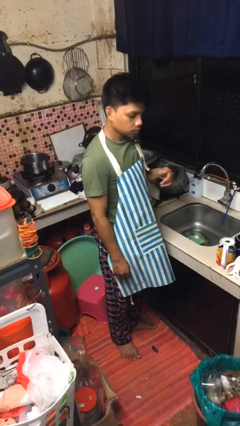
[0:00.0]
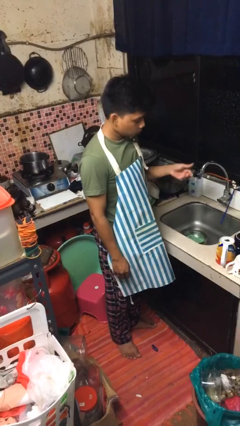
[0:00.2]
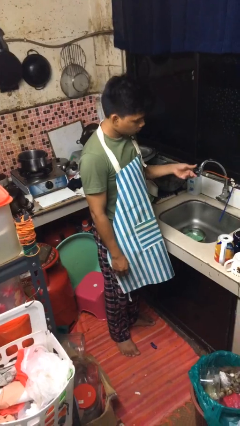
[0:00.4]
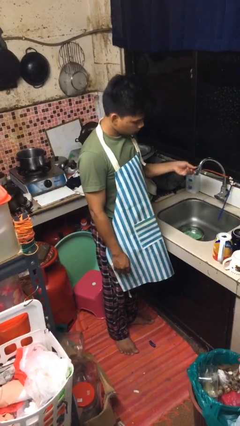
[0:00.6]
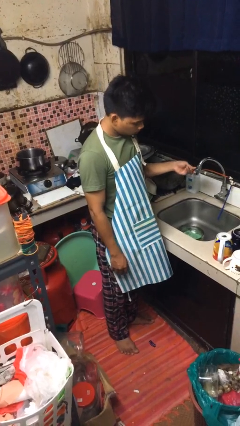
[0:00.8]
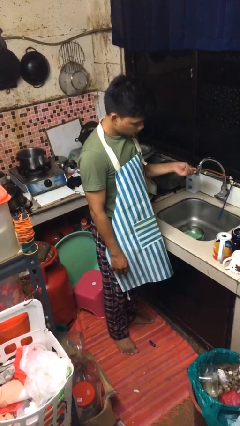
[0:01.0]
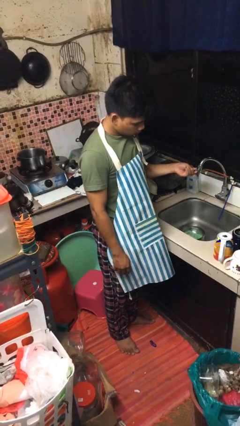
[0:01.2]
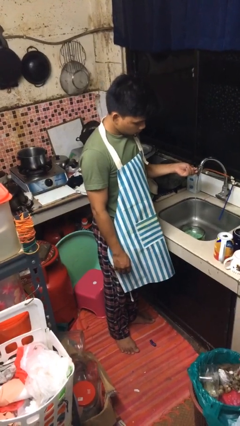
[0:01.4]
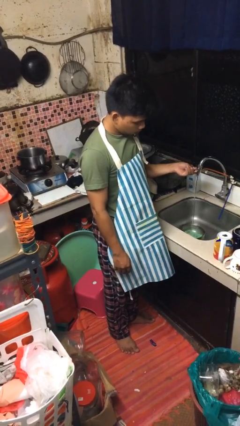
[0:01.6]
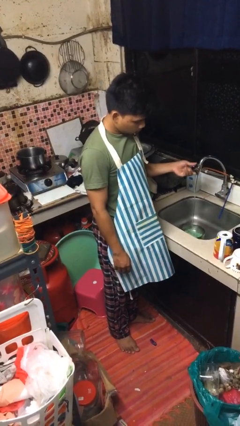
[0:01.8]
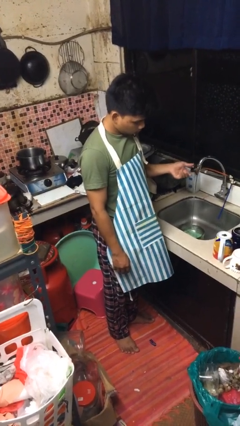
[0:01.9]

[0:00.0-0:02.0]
person turns on faucet

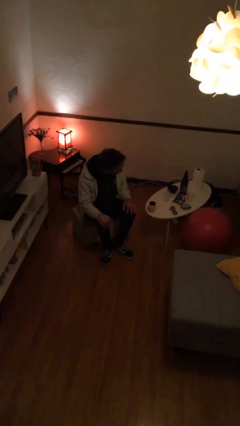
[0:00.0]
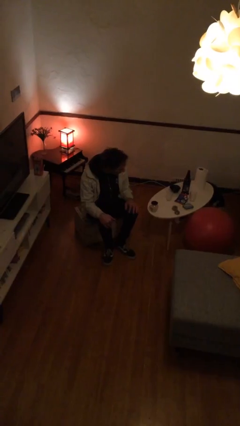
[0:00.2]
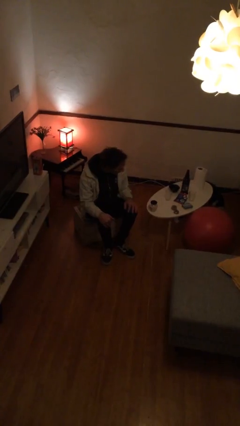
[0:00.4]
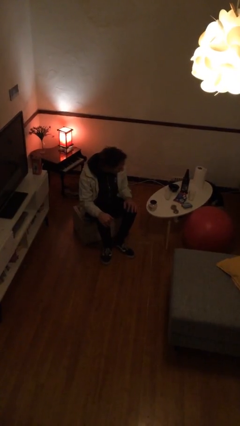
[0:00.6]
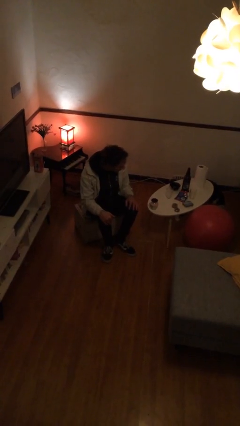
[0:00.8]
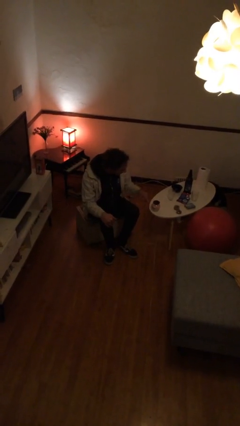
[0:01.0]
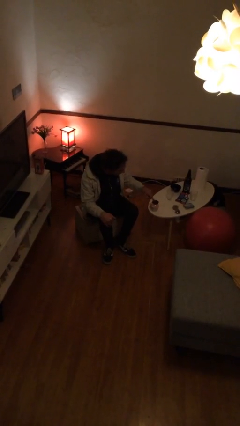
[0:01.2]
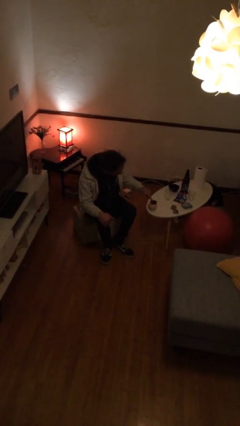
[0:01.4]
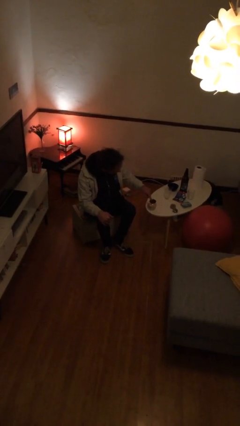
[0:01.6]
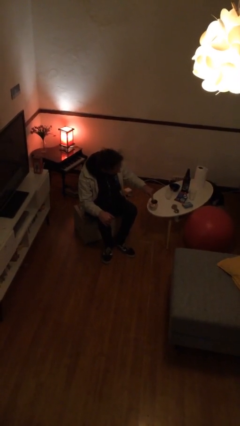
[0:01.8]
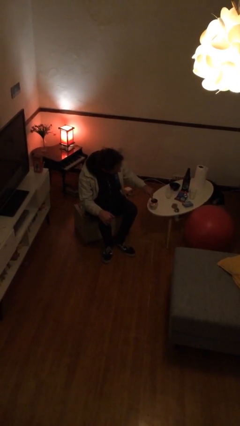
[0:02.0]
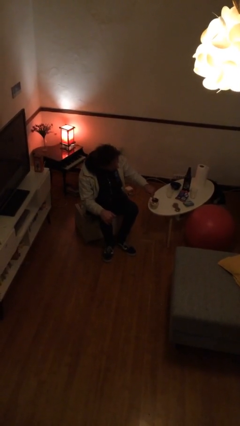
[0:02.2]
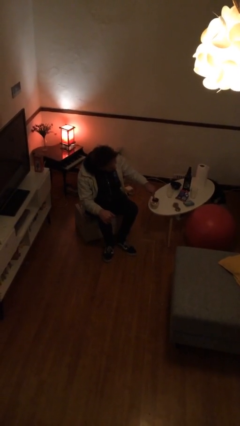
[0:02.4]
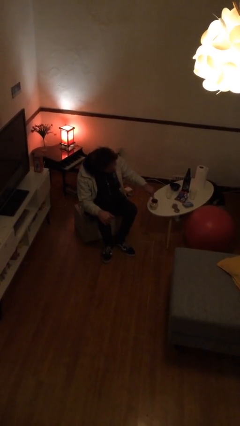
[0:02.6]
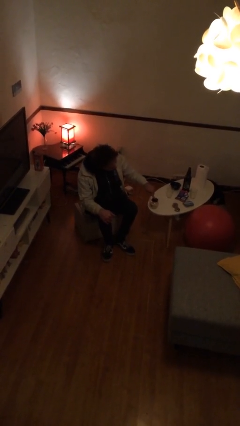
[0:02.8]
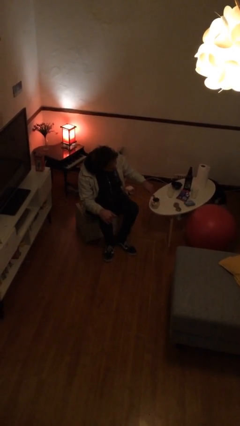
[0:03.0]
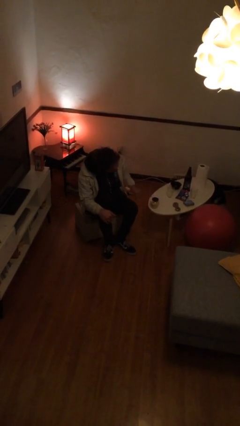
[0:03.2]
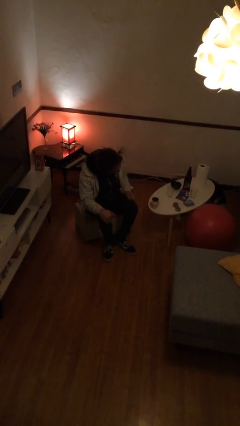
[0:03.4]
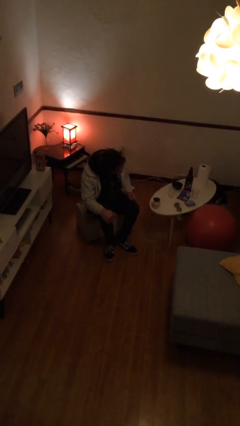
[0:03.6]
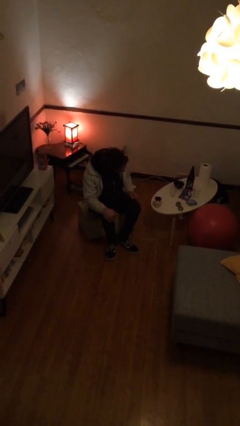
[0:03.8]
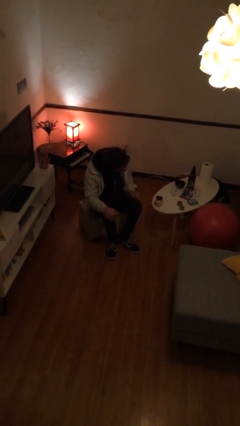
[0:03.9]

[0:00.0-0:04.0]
person taps object with finger

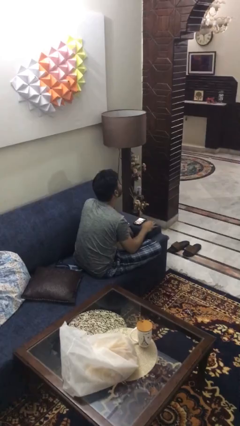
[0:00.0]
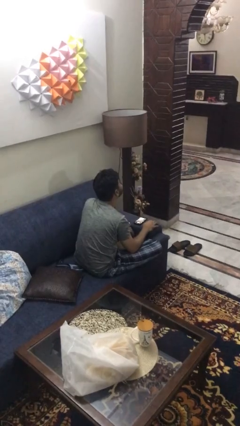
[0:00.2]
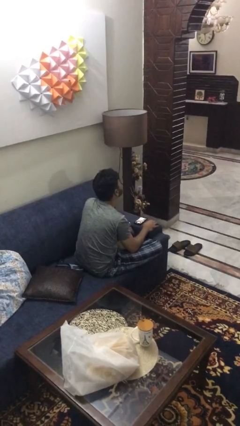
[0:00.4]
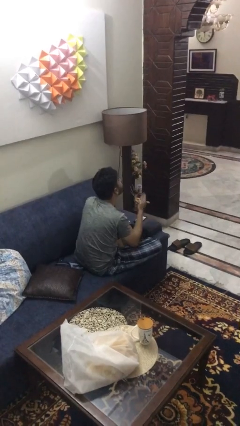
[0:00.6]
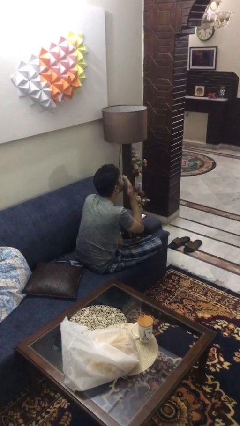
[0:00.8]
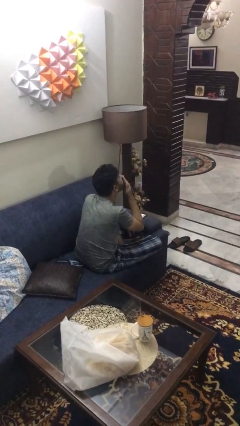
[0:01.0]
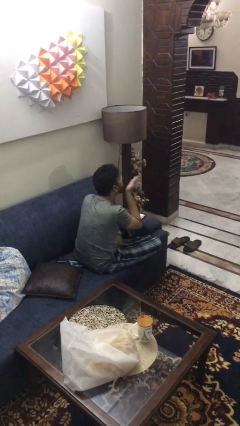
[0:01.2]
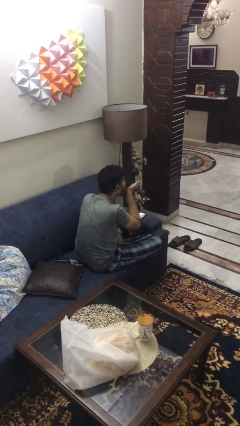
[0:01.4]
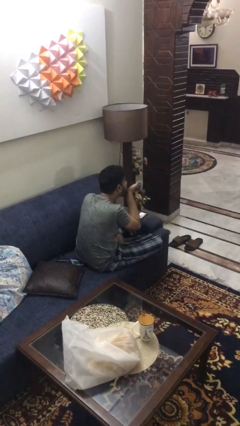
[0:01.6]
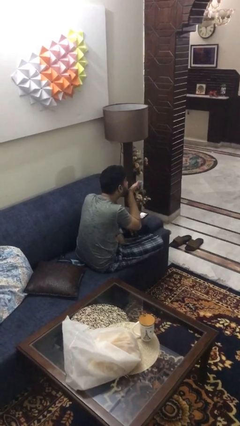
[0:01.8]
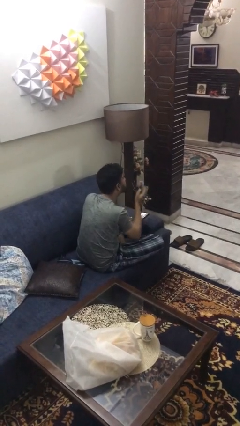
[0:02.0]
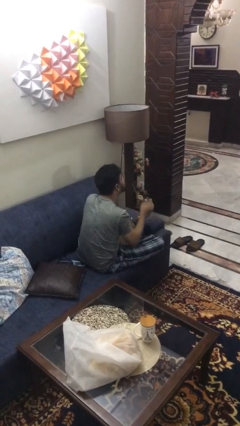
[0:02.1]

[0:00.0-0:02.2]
person gestures blow kiss

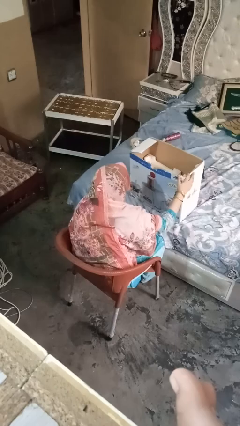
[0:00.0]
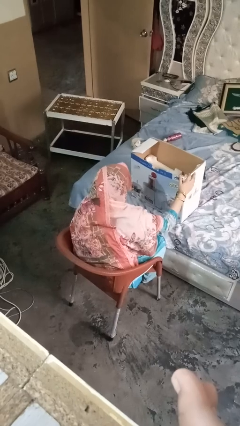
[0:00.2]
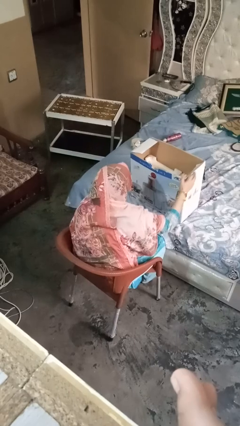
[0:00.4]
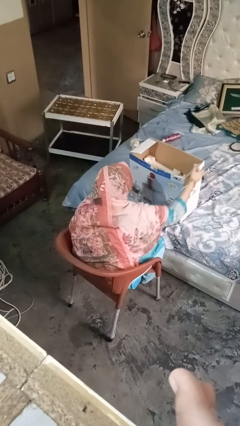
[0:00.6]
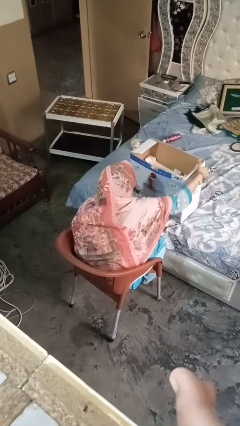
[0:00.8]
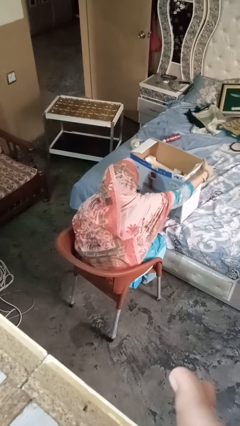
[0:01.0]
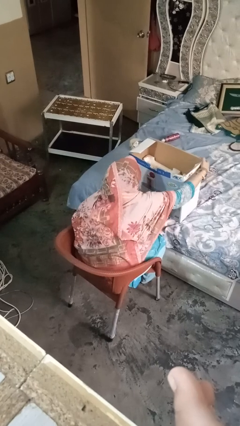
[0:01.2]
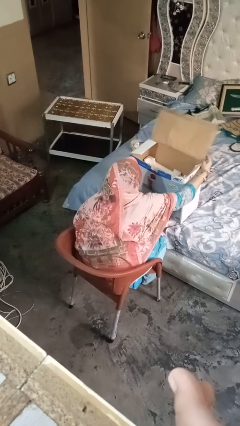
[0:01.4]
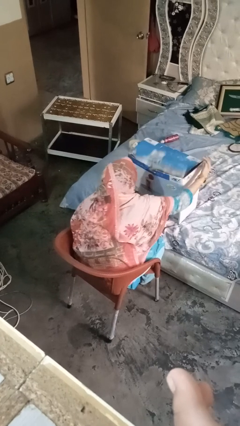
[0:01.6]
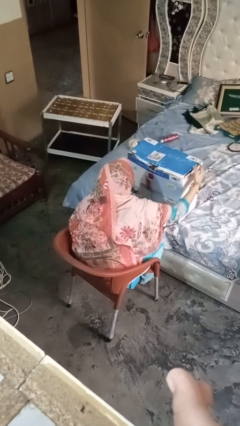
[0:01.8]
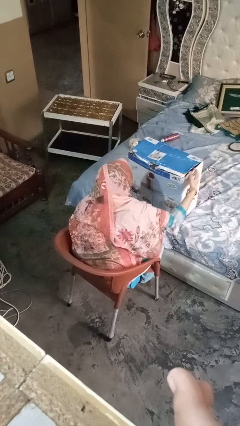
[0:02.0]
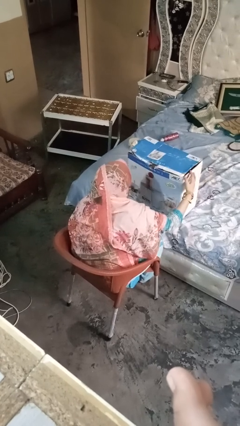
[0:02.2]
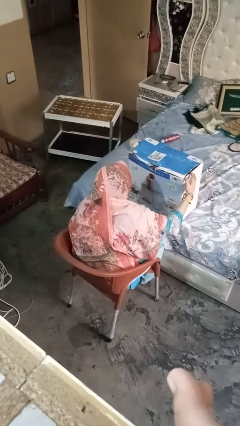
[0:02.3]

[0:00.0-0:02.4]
person closes box

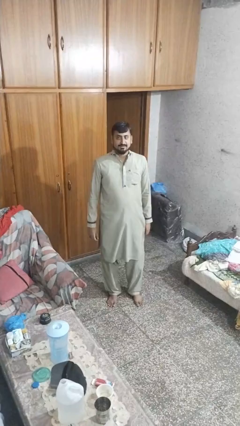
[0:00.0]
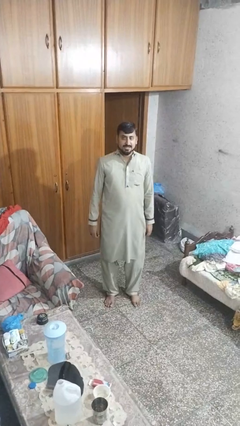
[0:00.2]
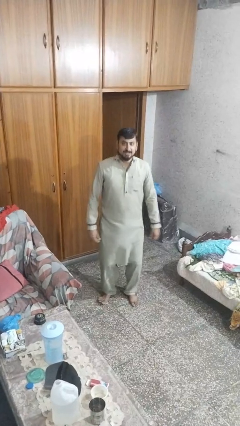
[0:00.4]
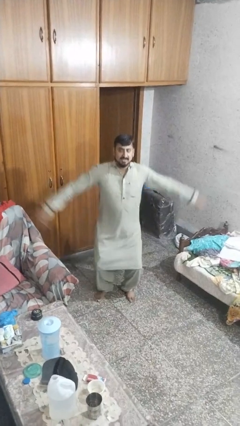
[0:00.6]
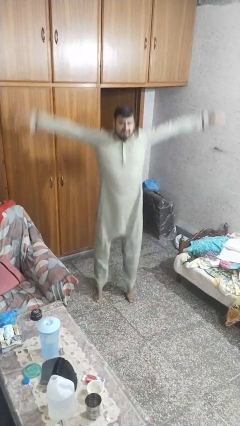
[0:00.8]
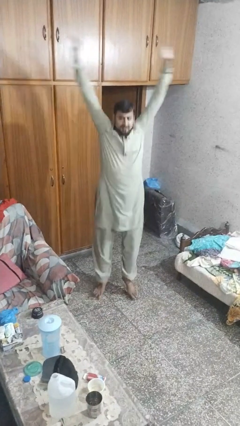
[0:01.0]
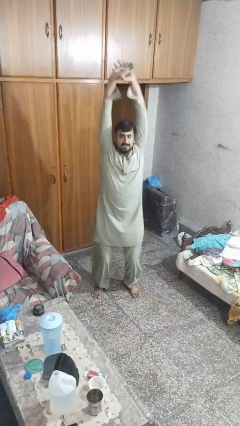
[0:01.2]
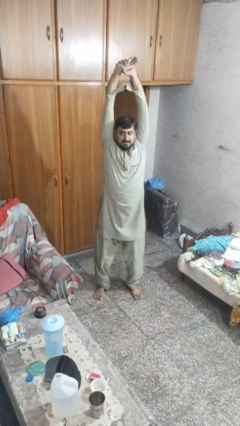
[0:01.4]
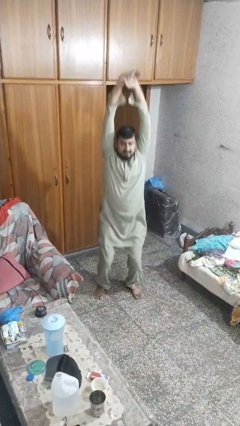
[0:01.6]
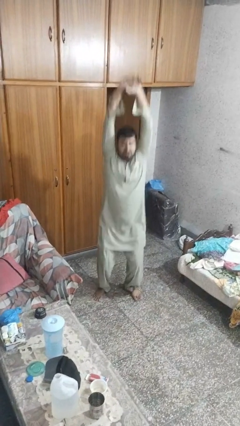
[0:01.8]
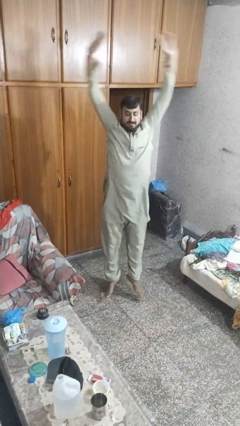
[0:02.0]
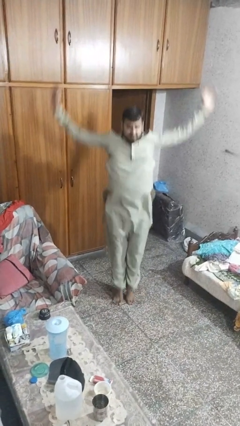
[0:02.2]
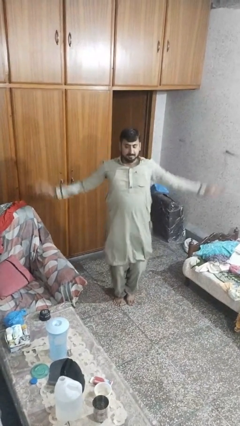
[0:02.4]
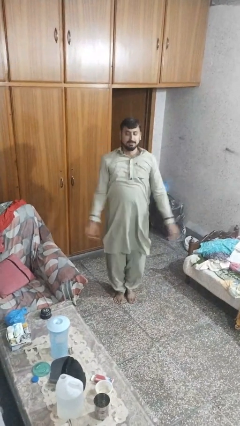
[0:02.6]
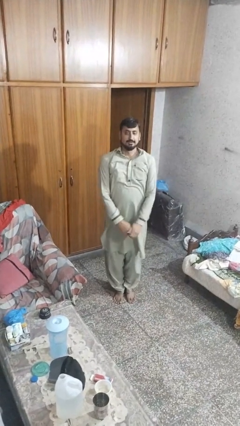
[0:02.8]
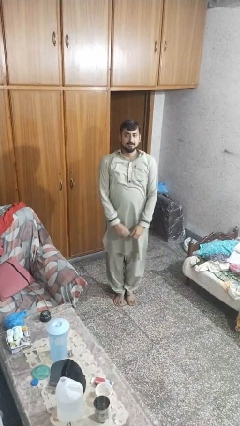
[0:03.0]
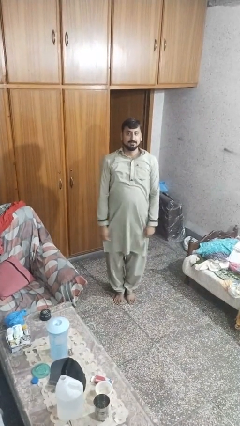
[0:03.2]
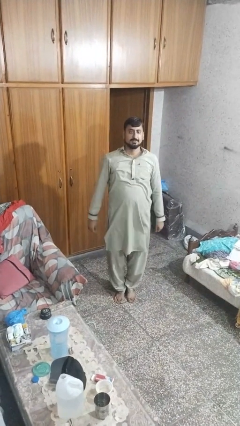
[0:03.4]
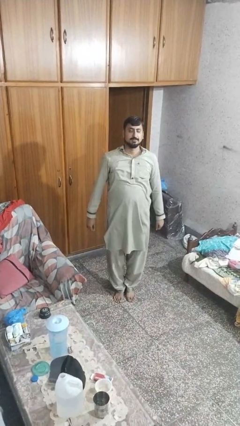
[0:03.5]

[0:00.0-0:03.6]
person exercises with jumping jacks

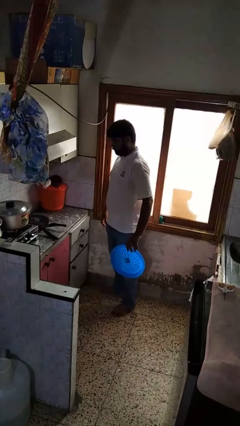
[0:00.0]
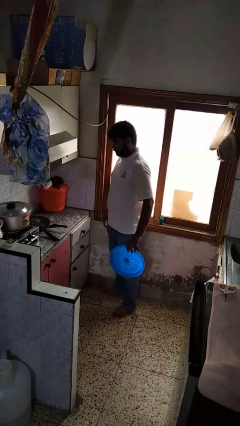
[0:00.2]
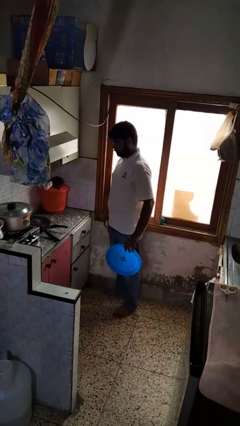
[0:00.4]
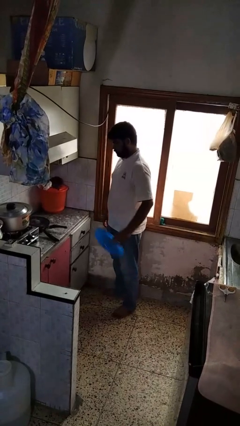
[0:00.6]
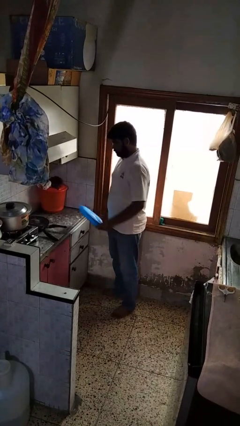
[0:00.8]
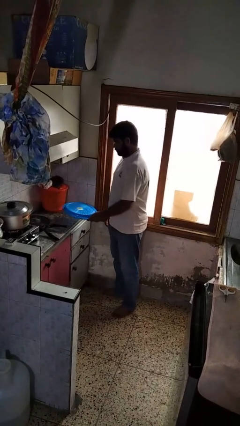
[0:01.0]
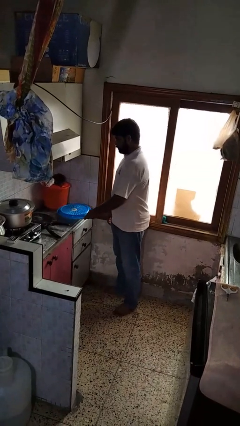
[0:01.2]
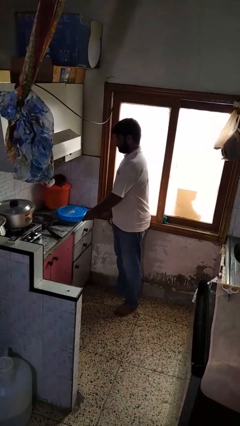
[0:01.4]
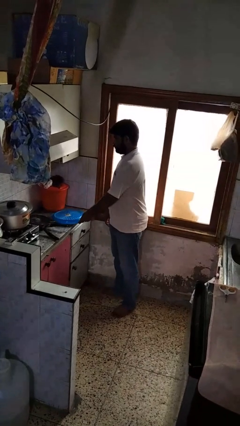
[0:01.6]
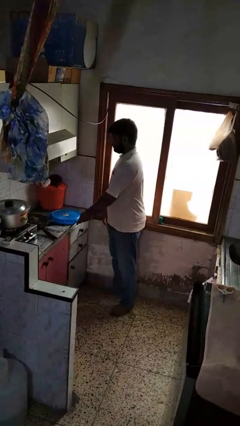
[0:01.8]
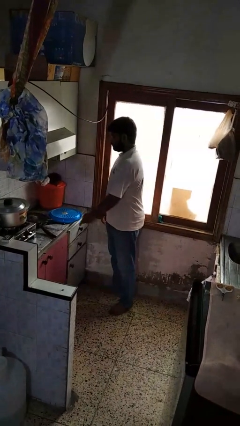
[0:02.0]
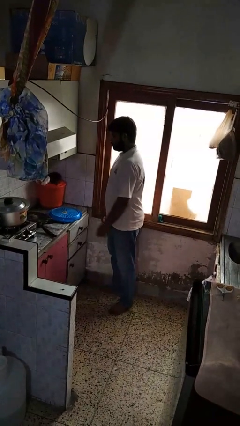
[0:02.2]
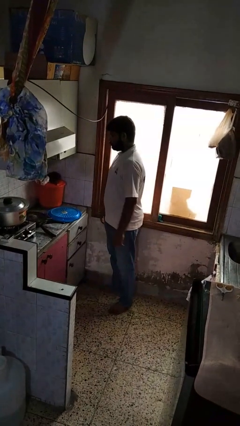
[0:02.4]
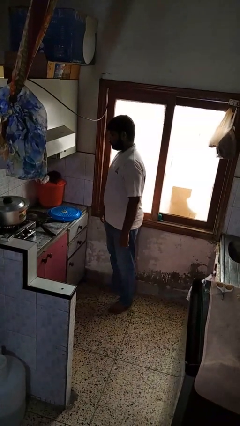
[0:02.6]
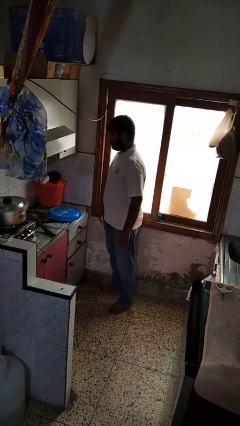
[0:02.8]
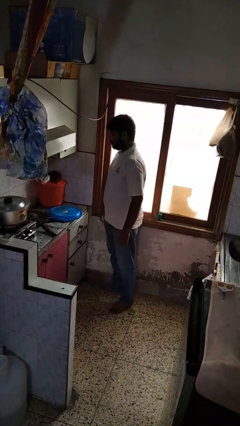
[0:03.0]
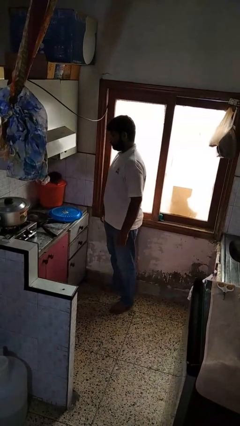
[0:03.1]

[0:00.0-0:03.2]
person puts down object on countertop
